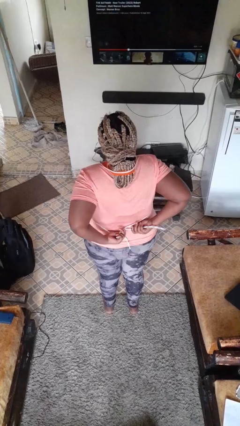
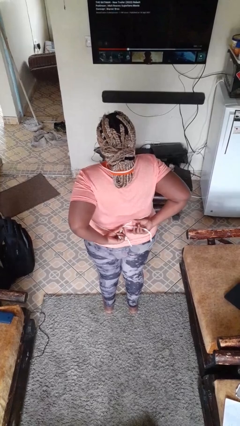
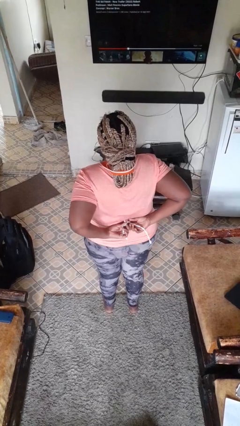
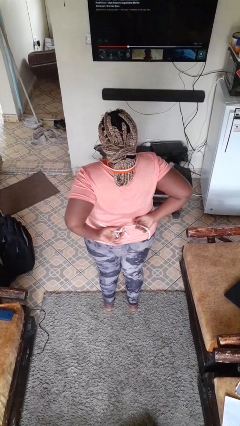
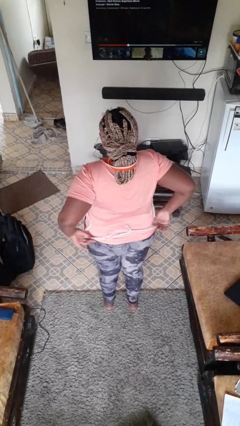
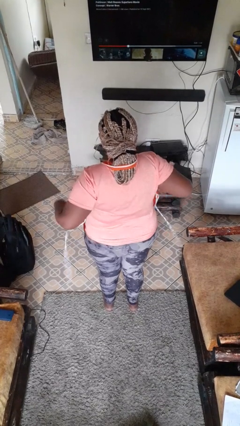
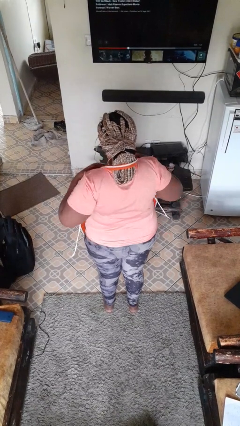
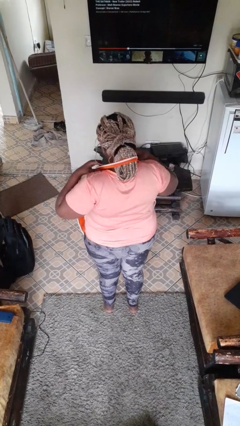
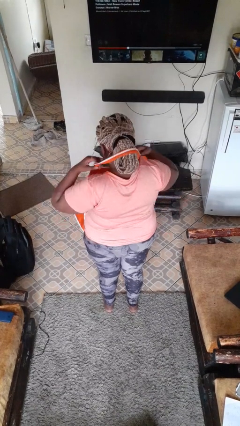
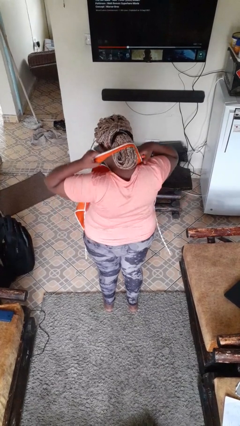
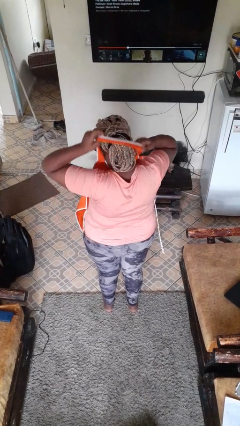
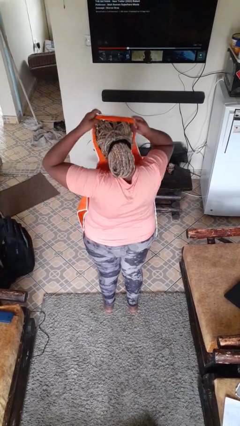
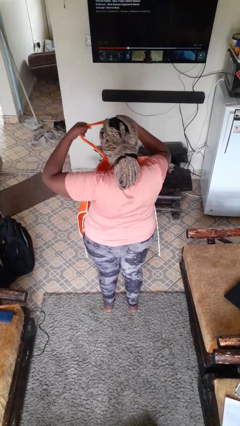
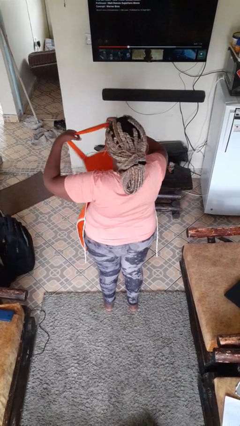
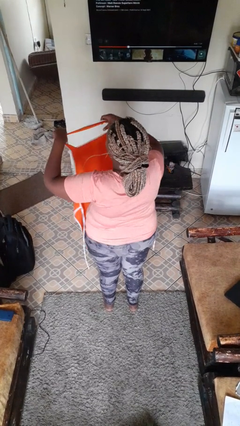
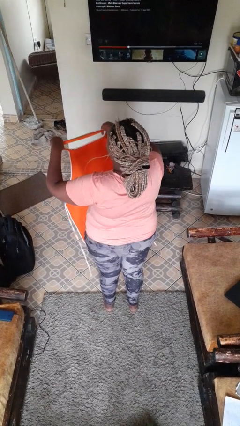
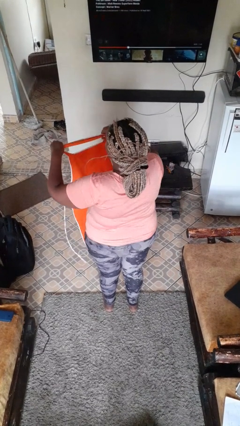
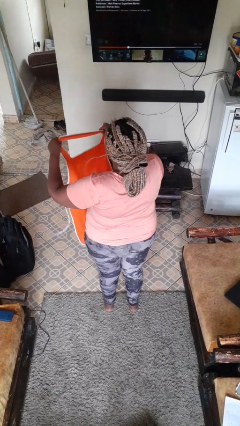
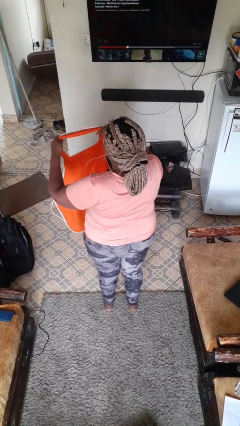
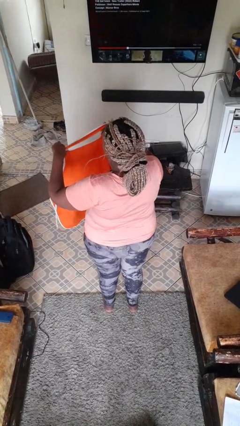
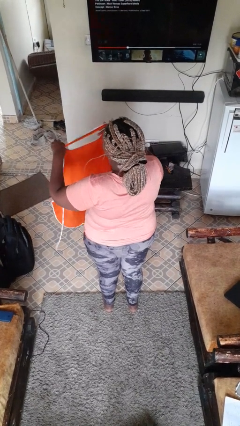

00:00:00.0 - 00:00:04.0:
person takes off apron

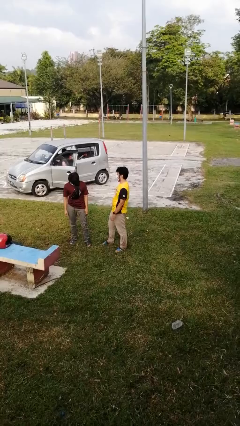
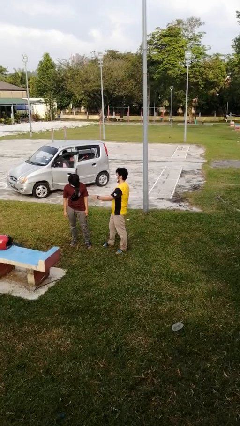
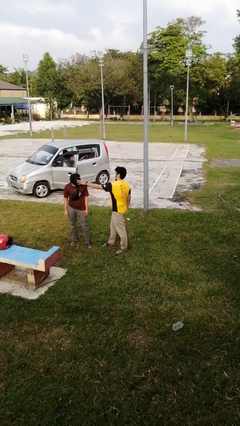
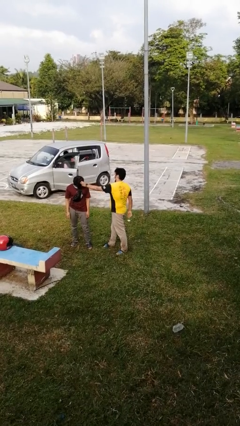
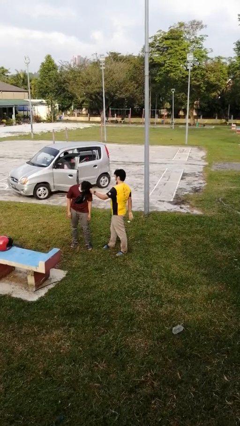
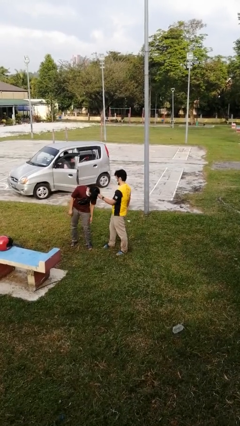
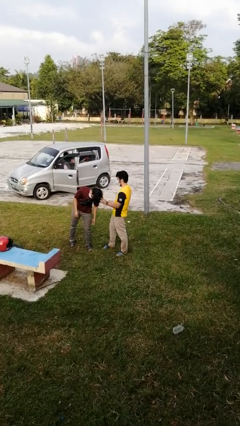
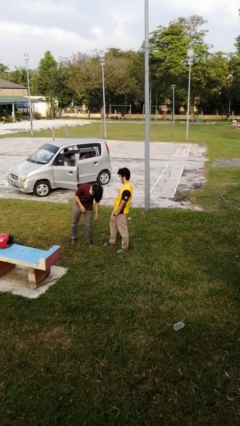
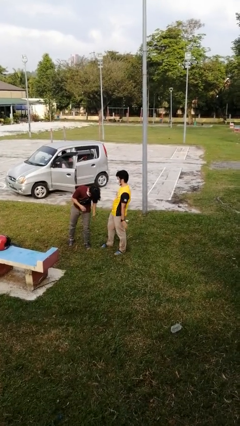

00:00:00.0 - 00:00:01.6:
person grabs person by hair

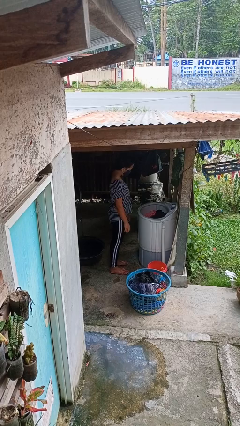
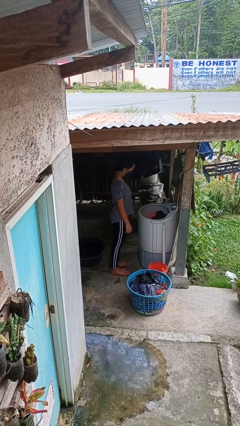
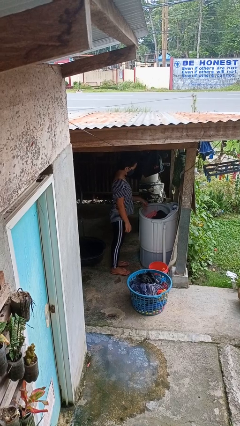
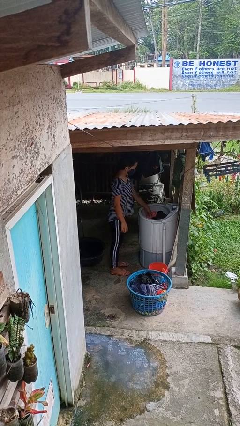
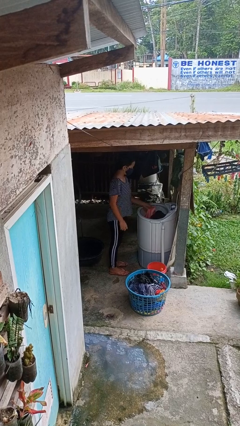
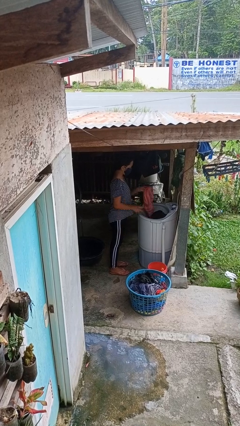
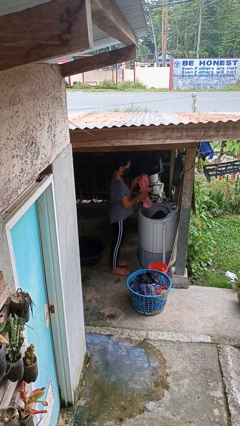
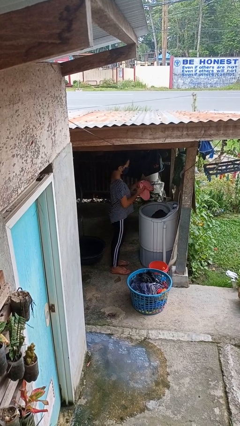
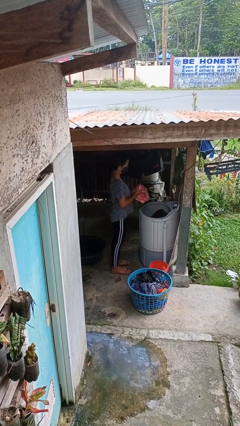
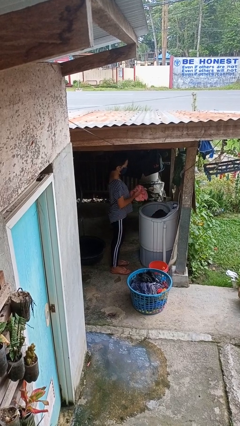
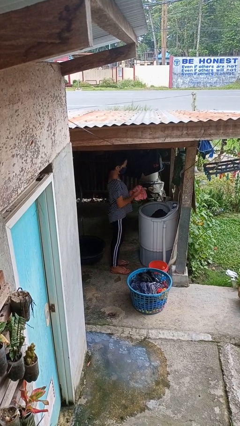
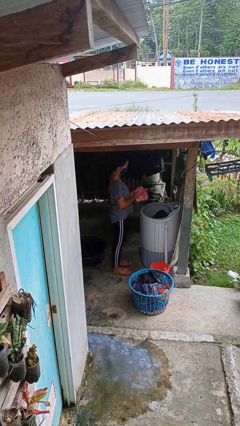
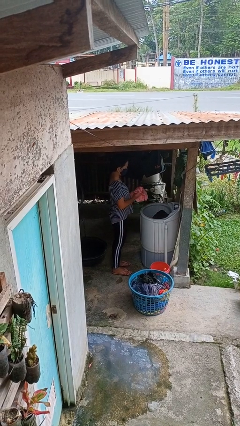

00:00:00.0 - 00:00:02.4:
person unloads clotheswasher

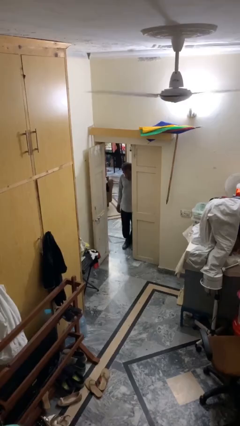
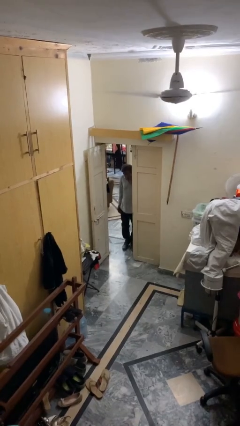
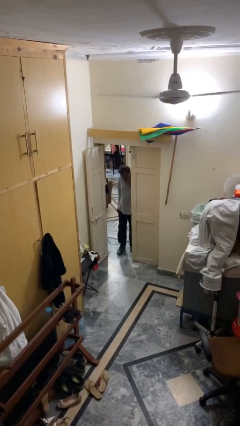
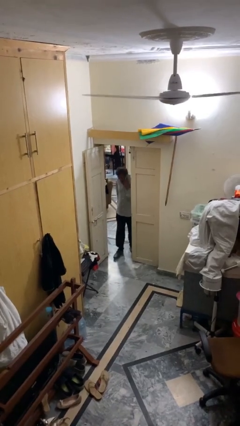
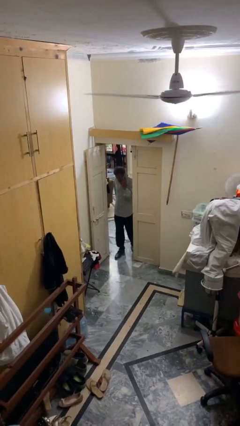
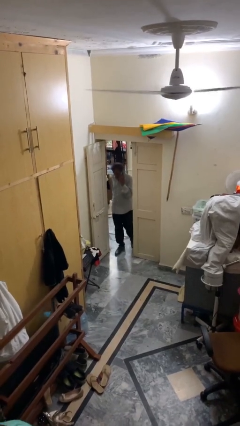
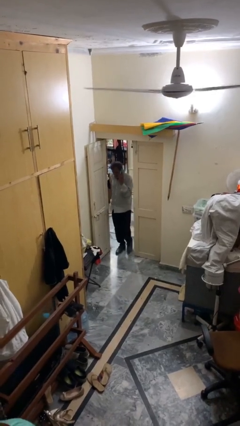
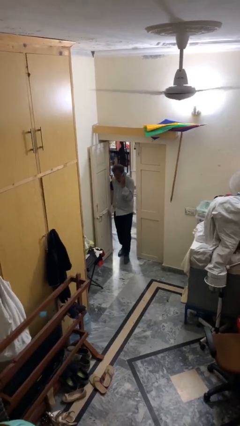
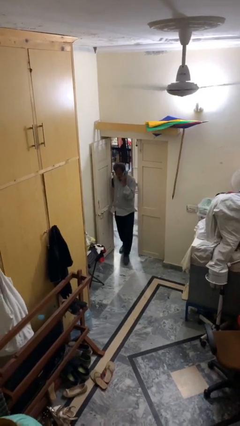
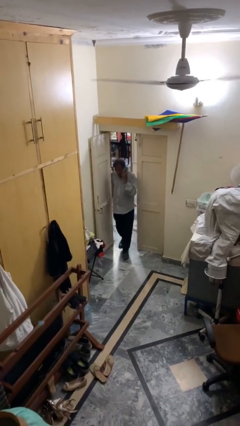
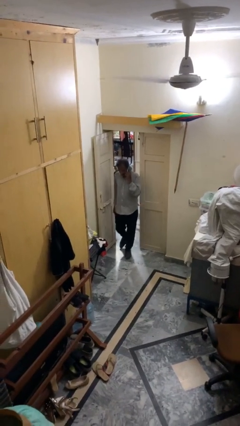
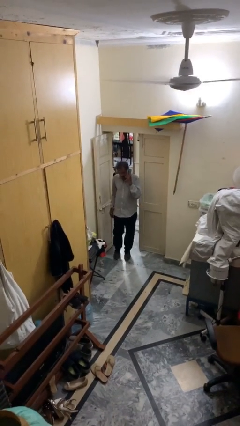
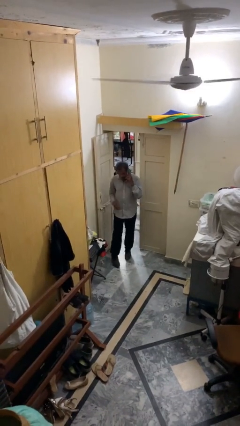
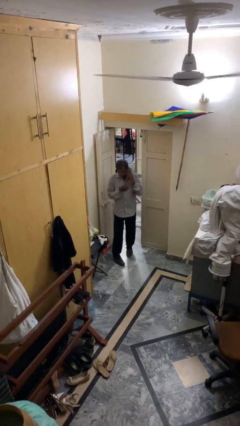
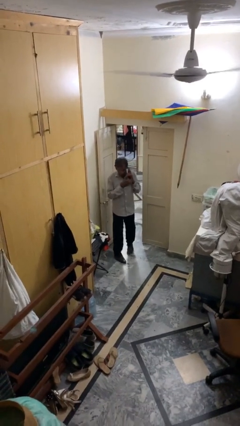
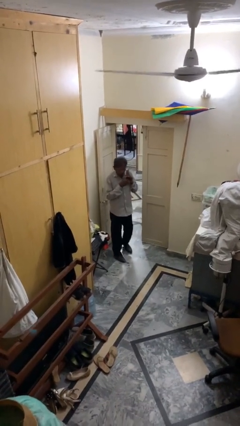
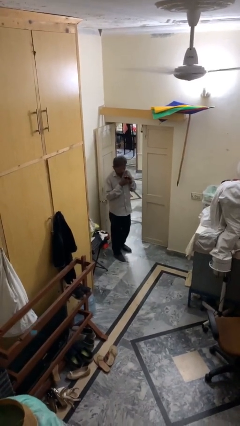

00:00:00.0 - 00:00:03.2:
person enters scene through structure

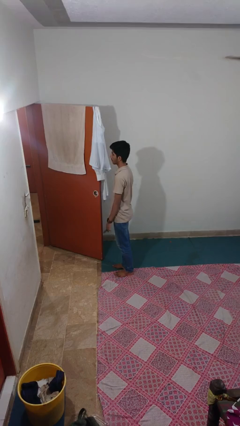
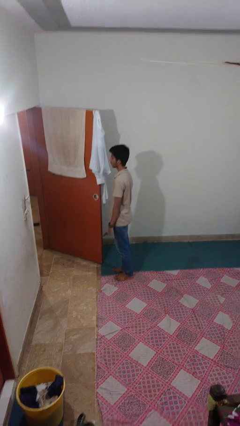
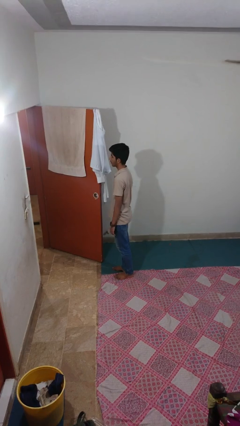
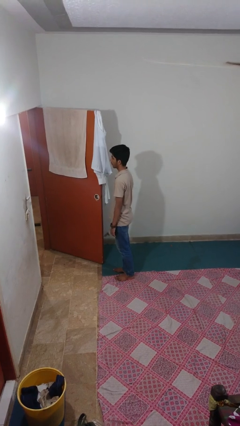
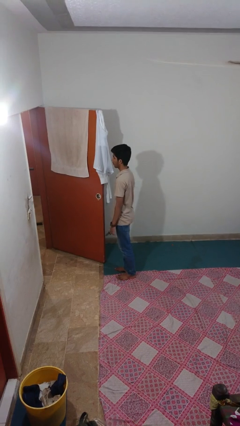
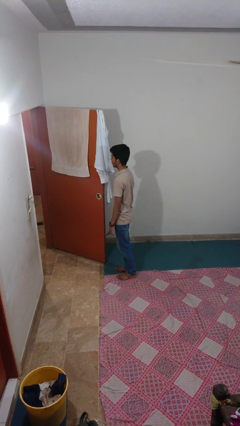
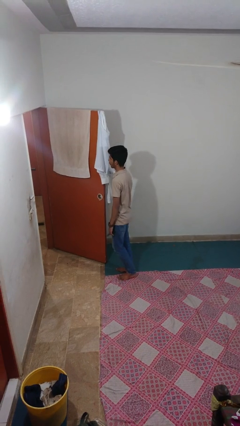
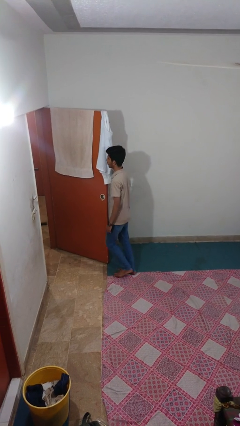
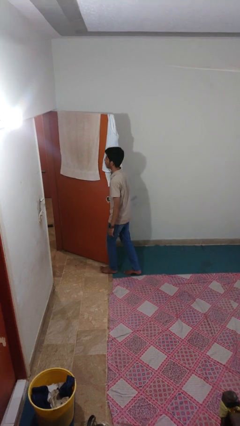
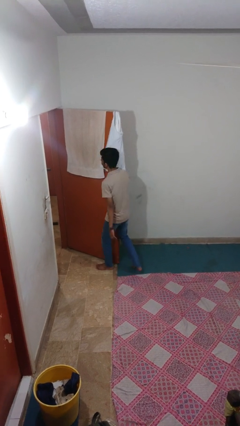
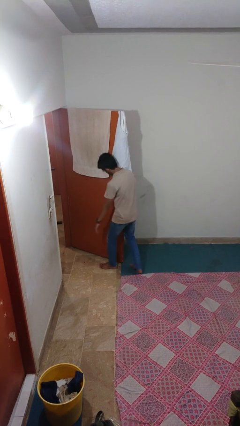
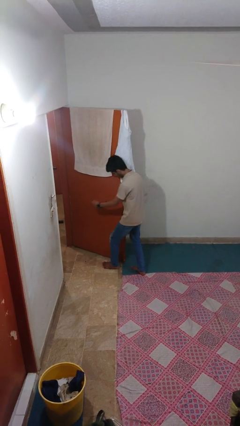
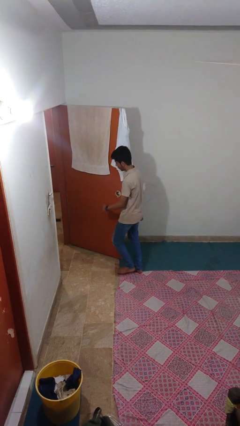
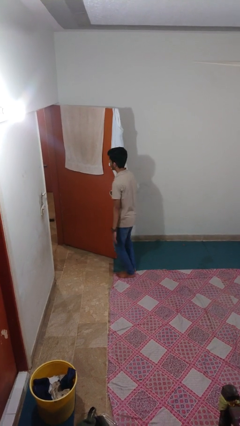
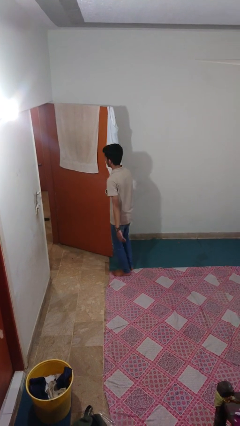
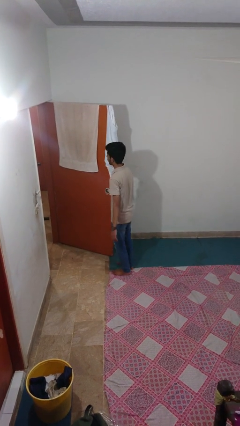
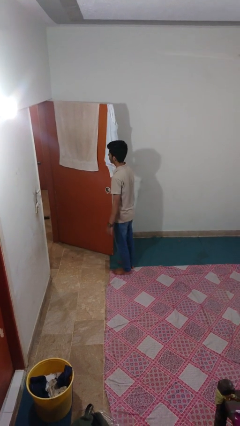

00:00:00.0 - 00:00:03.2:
person bumps into wall

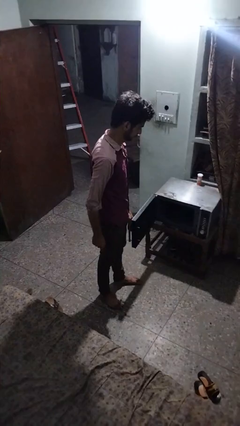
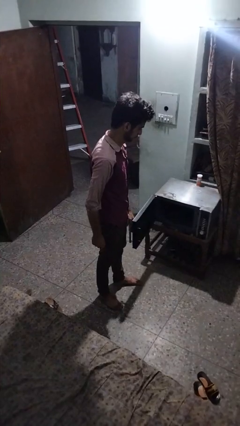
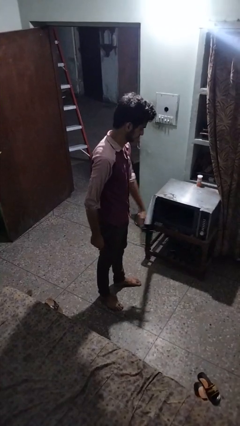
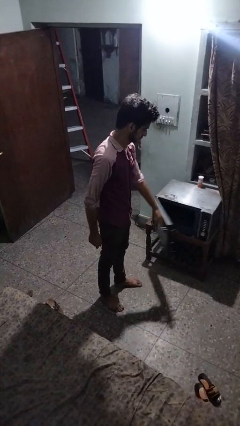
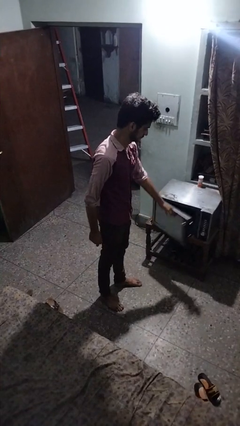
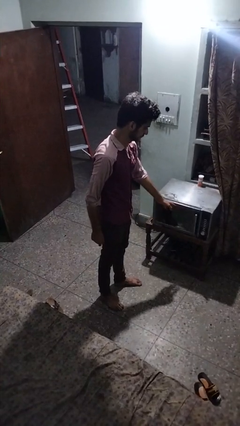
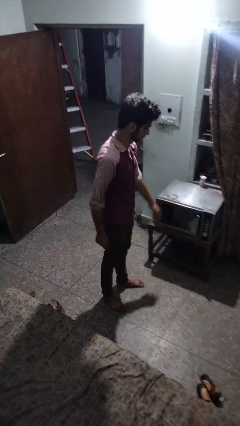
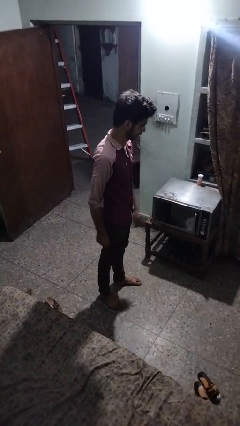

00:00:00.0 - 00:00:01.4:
person closes microwave

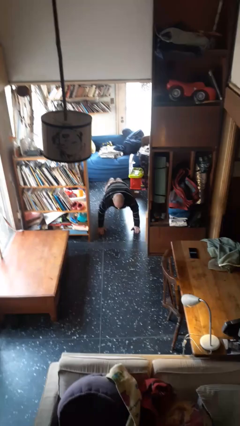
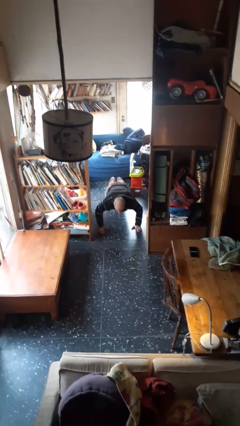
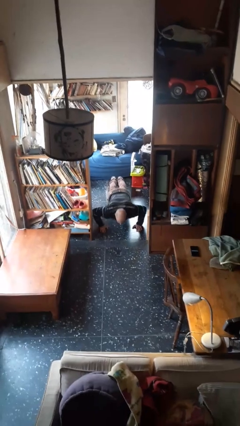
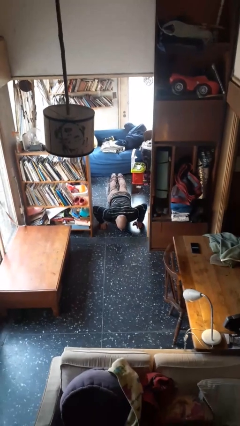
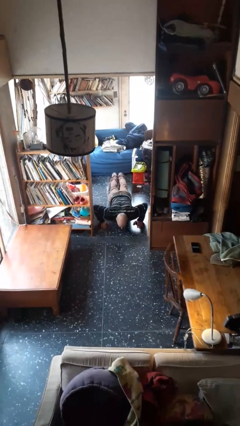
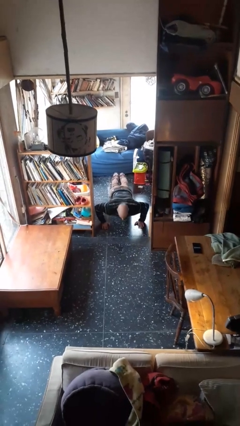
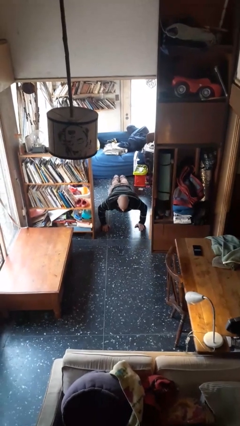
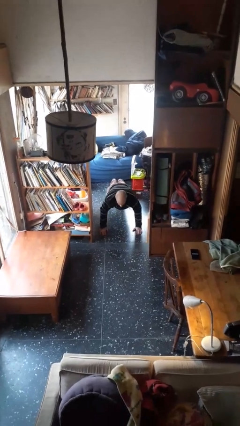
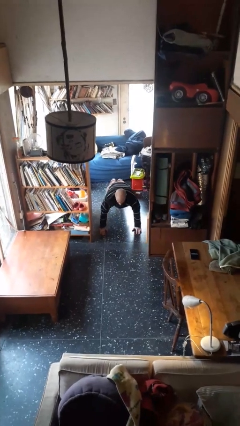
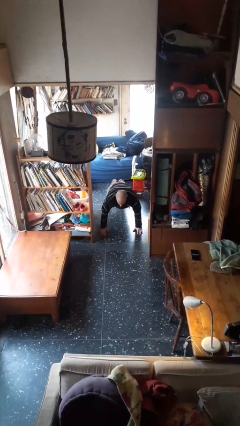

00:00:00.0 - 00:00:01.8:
person exercises with pushup
